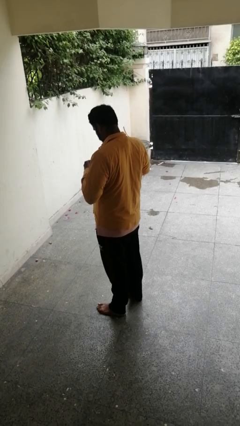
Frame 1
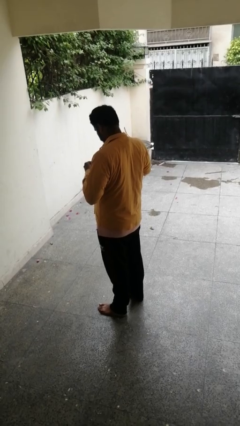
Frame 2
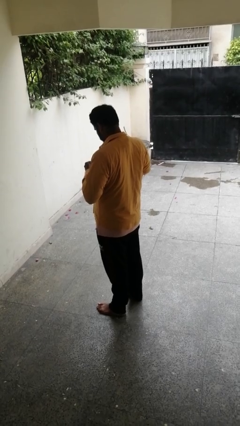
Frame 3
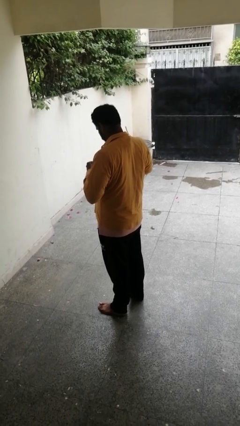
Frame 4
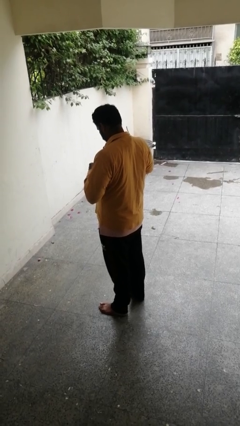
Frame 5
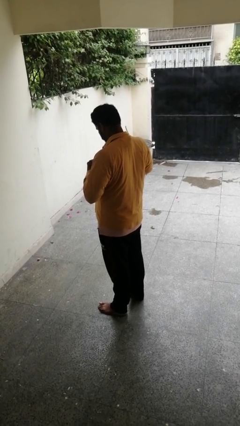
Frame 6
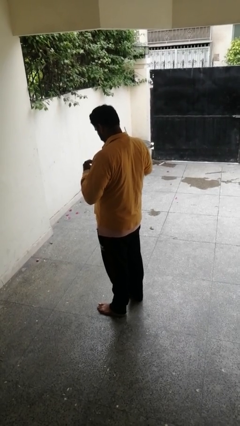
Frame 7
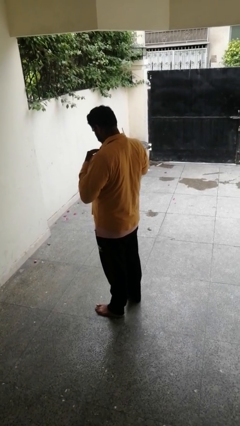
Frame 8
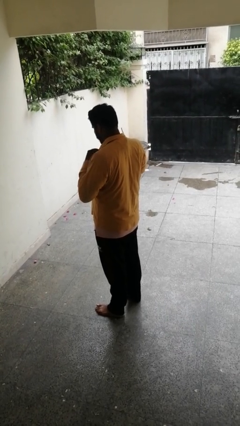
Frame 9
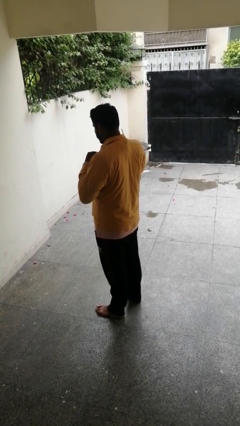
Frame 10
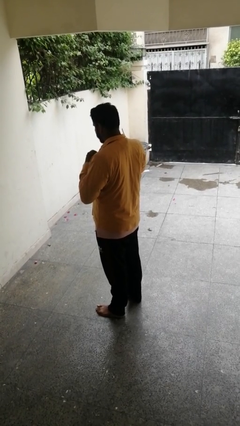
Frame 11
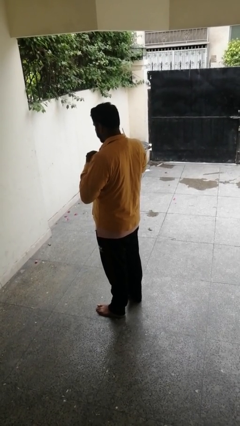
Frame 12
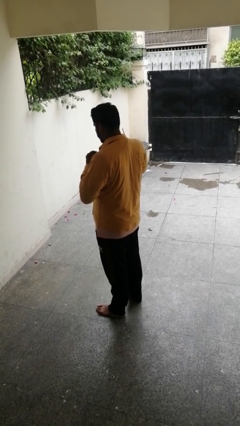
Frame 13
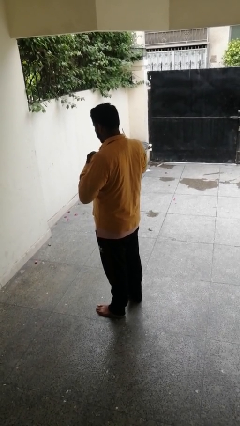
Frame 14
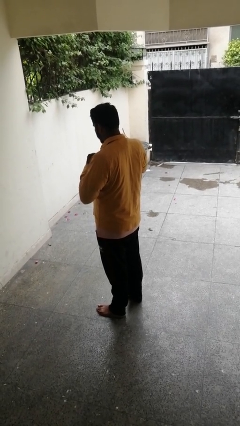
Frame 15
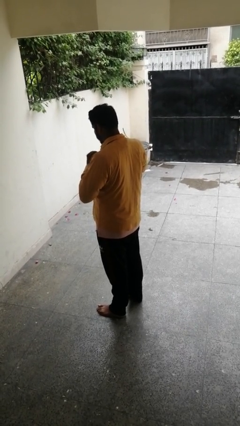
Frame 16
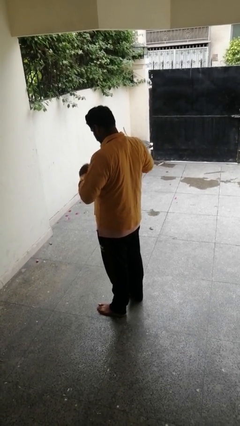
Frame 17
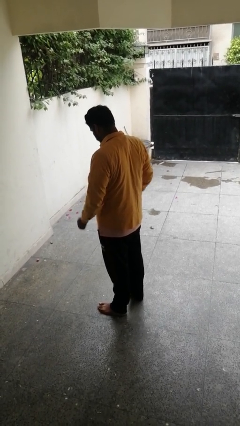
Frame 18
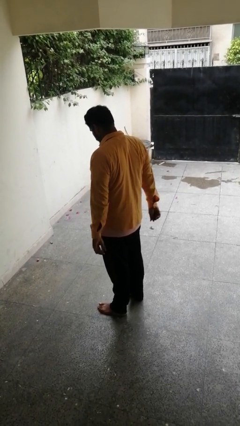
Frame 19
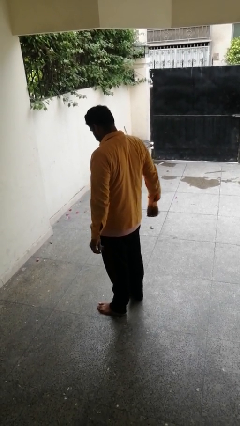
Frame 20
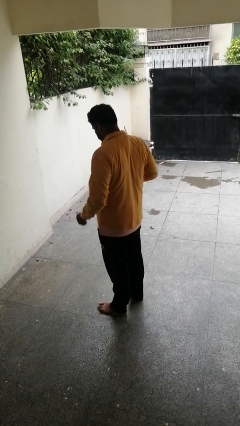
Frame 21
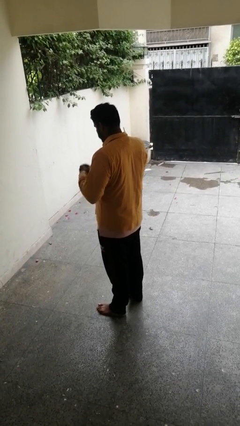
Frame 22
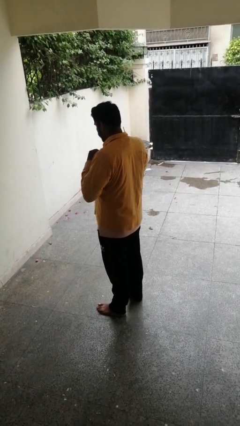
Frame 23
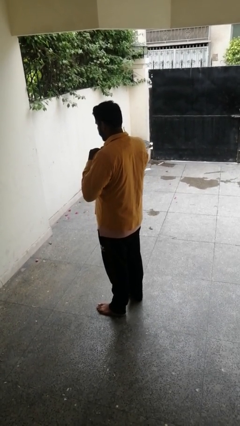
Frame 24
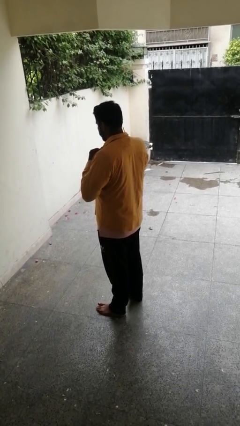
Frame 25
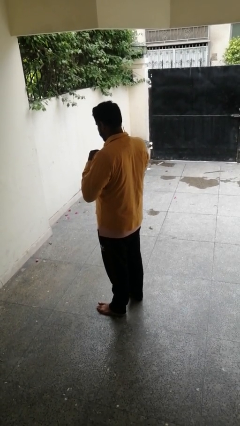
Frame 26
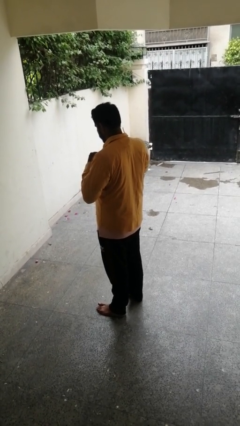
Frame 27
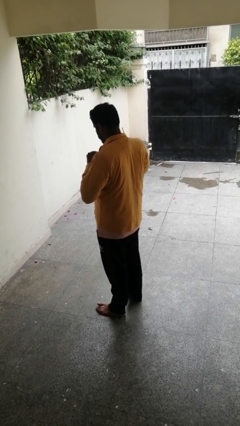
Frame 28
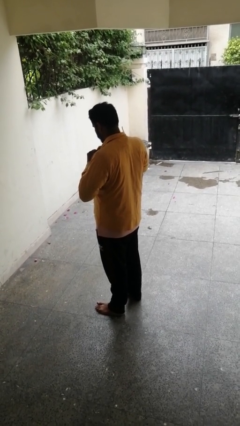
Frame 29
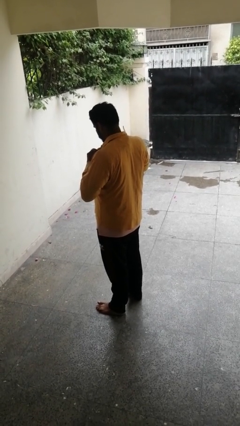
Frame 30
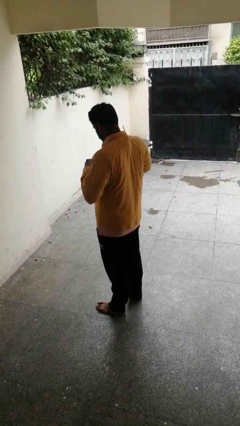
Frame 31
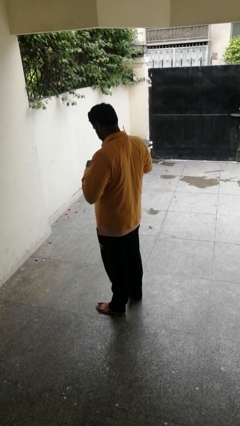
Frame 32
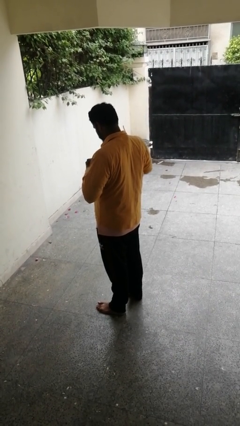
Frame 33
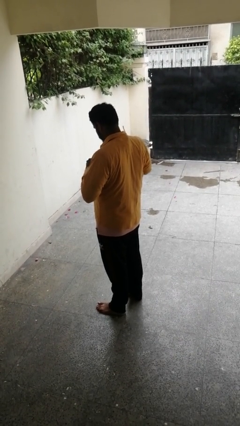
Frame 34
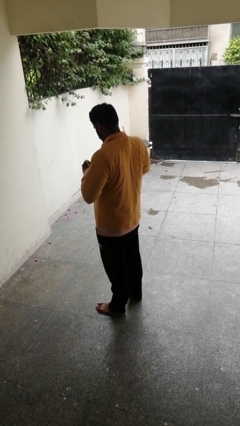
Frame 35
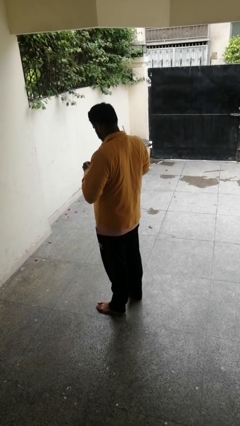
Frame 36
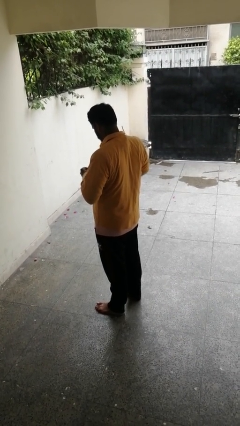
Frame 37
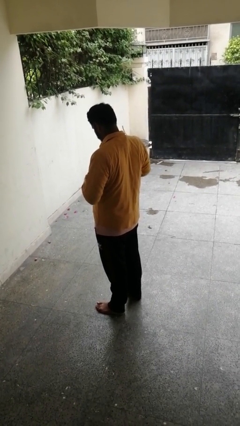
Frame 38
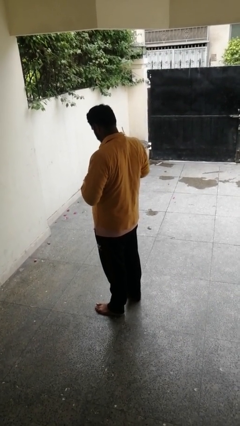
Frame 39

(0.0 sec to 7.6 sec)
person unbuttons shirt

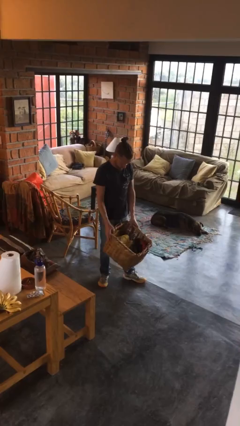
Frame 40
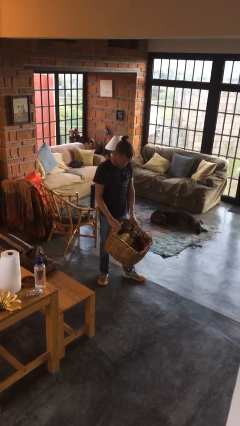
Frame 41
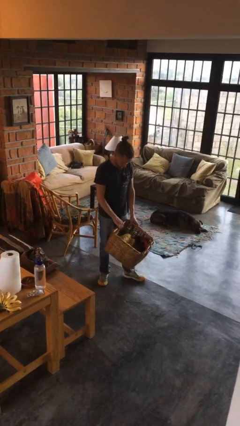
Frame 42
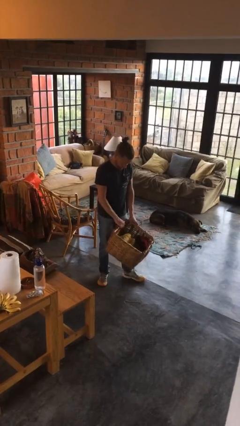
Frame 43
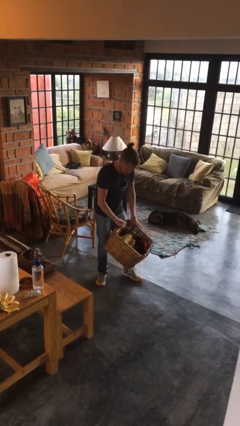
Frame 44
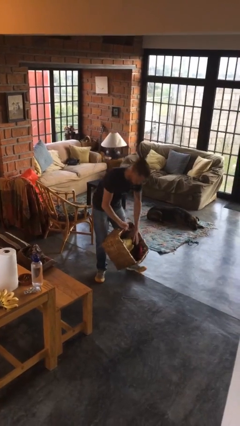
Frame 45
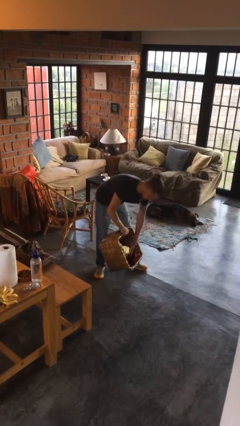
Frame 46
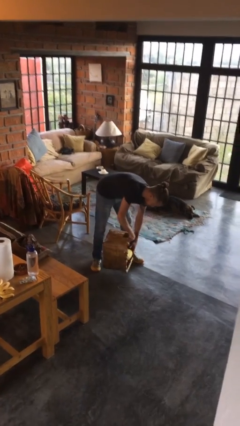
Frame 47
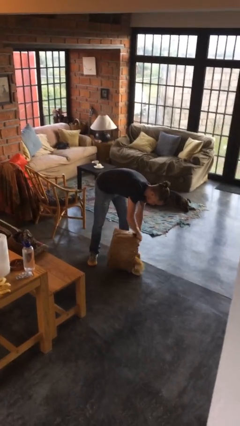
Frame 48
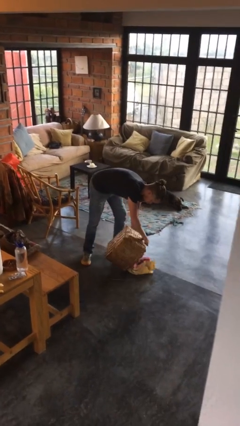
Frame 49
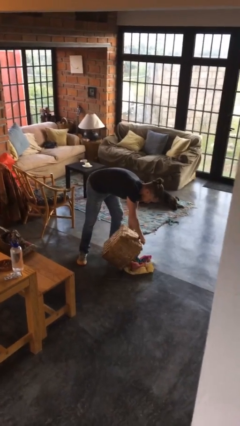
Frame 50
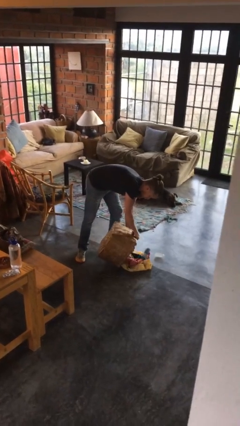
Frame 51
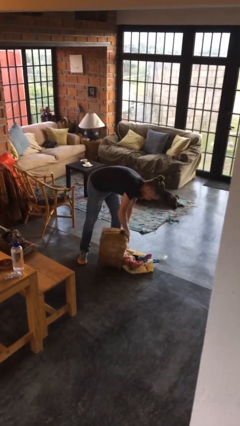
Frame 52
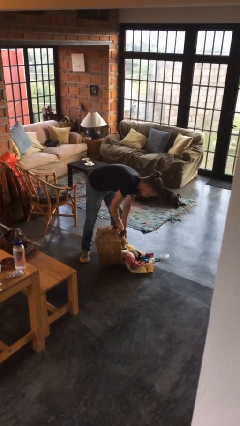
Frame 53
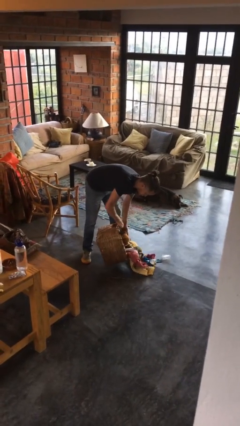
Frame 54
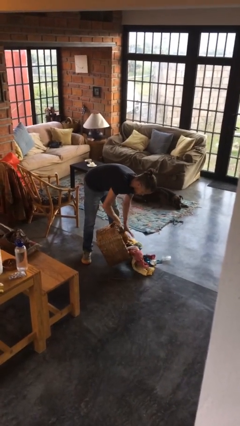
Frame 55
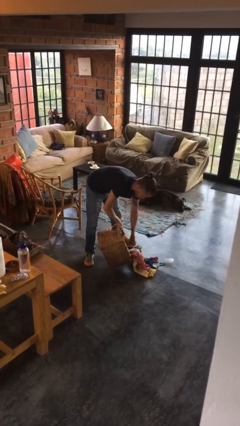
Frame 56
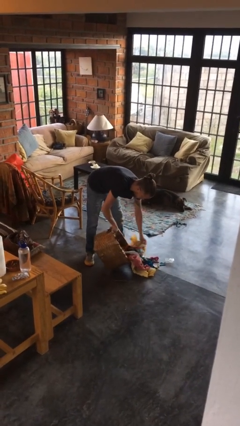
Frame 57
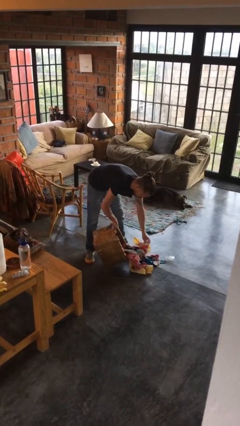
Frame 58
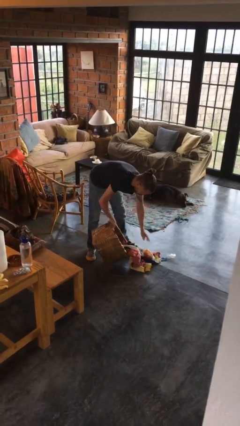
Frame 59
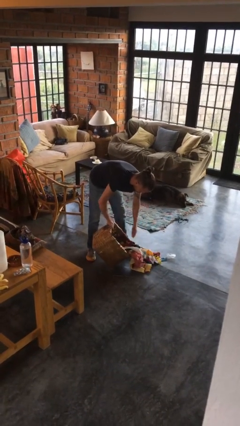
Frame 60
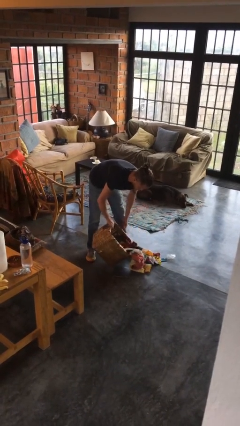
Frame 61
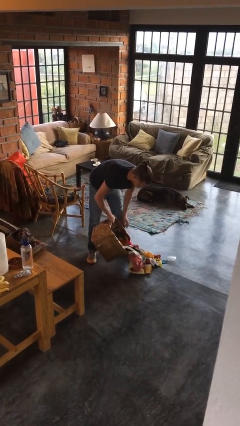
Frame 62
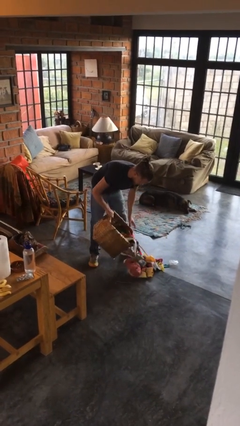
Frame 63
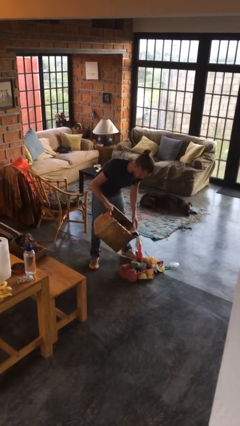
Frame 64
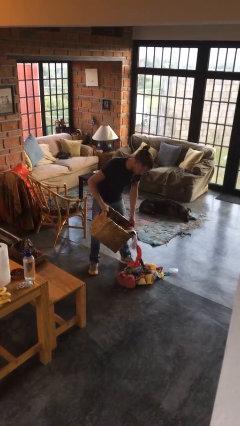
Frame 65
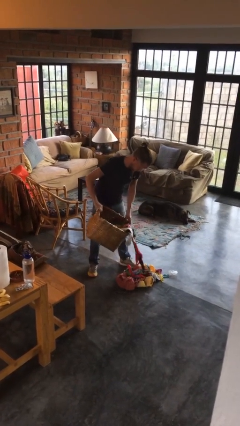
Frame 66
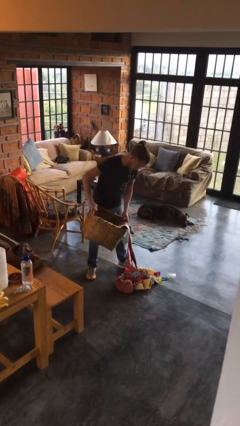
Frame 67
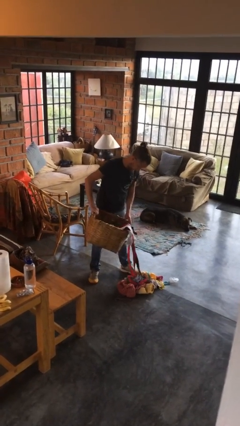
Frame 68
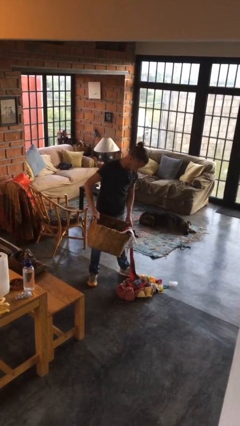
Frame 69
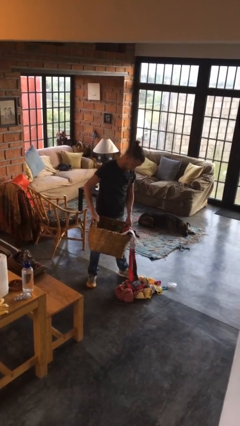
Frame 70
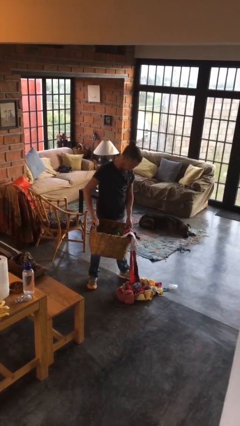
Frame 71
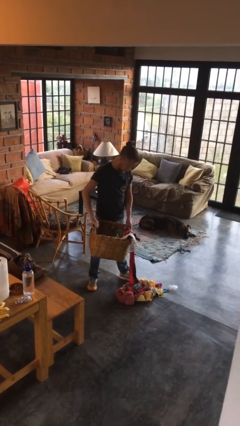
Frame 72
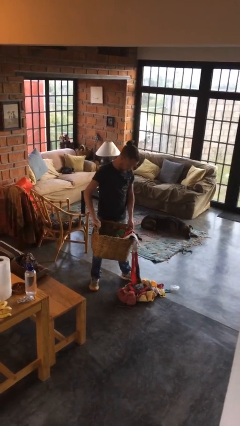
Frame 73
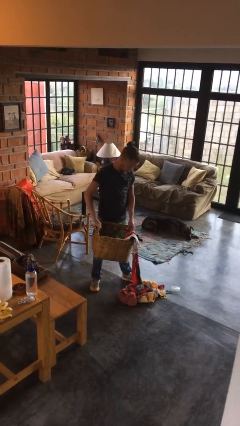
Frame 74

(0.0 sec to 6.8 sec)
person unloads box onto floor

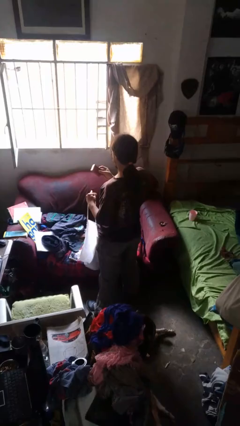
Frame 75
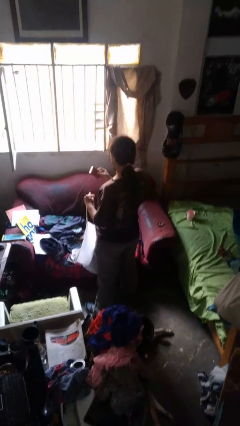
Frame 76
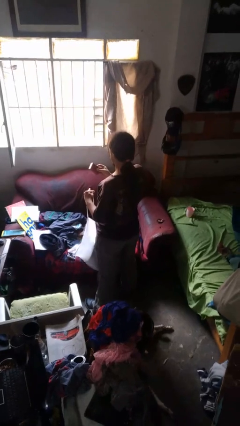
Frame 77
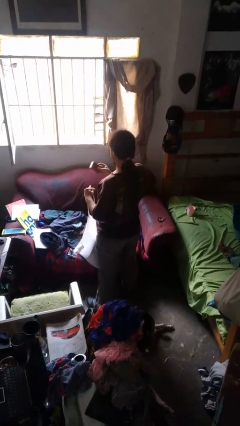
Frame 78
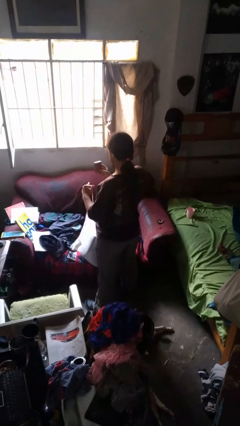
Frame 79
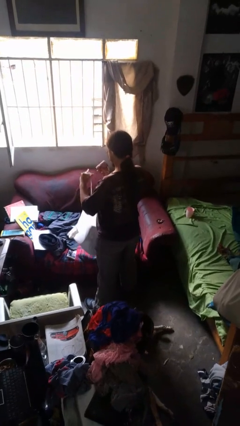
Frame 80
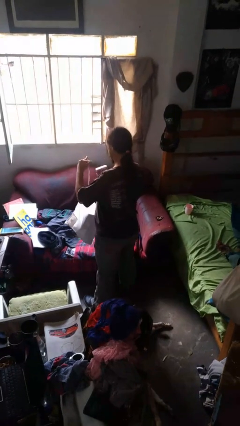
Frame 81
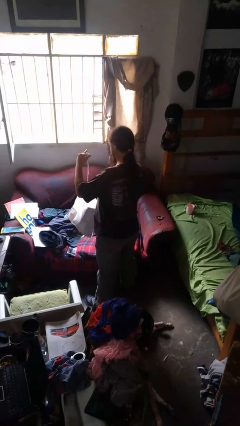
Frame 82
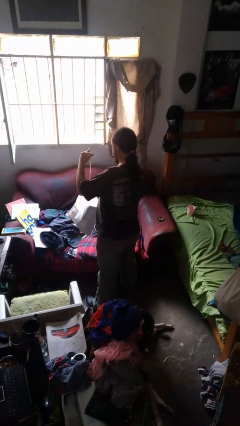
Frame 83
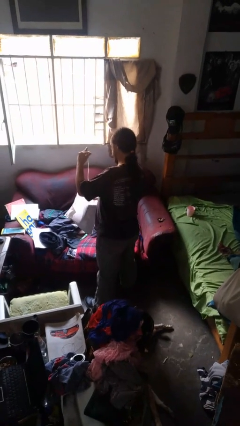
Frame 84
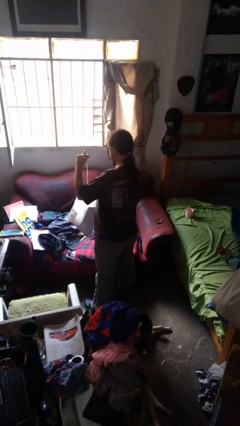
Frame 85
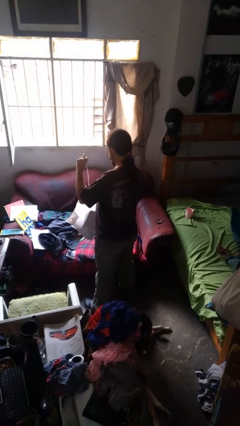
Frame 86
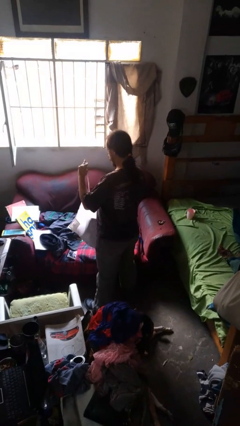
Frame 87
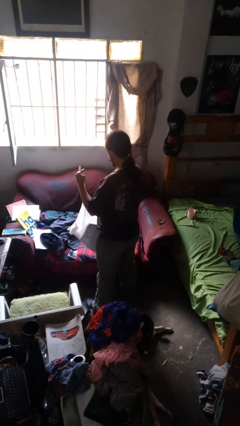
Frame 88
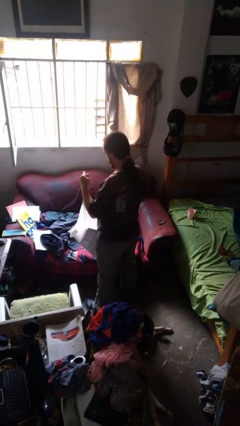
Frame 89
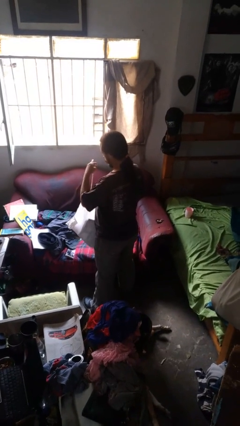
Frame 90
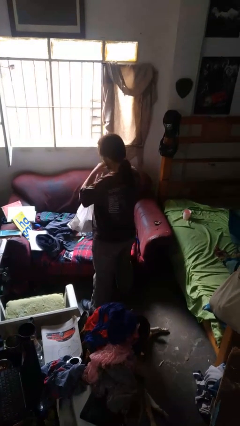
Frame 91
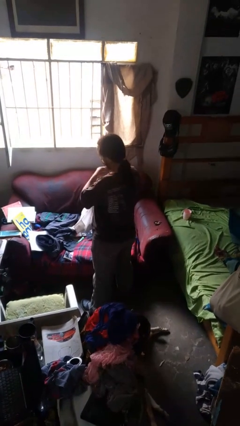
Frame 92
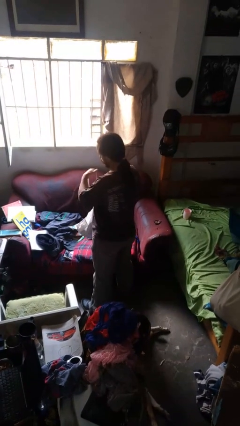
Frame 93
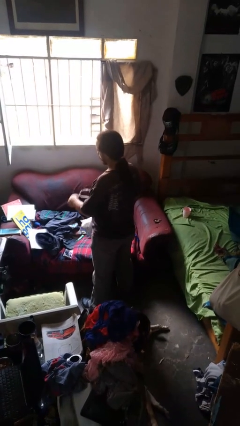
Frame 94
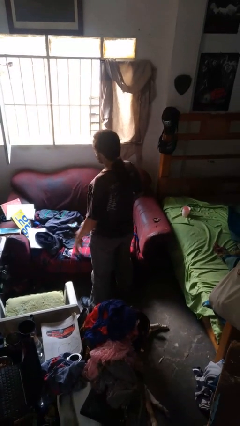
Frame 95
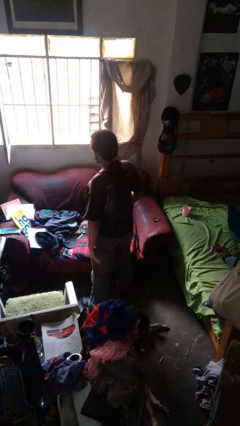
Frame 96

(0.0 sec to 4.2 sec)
person puts object into bag
